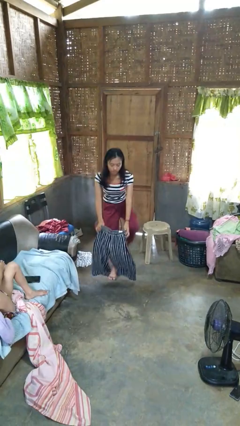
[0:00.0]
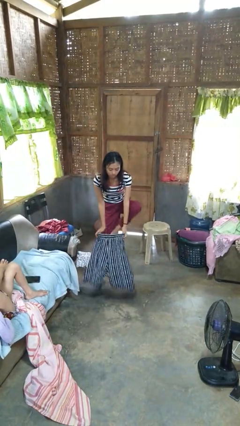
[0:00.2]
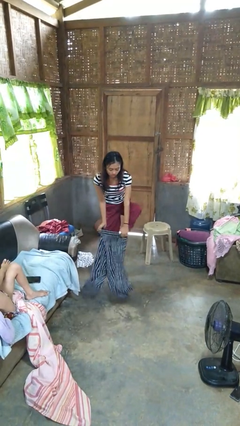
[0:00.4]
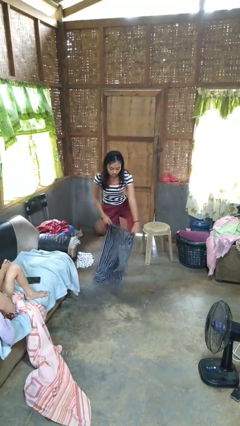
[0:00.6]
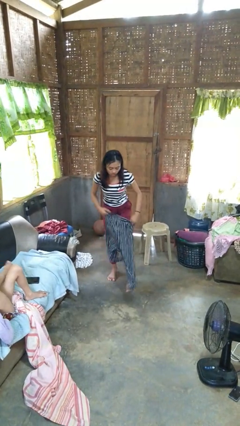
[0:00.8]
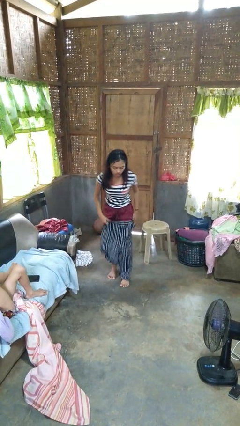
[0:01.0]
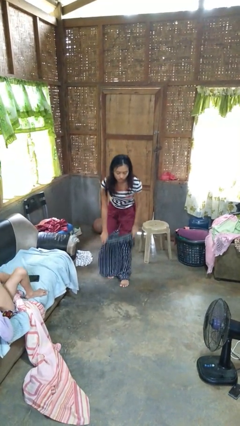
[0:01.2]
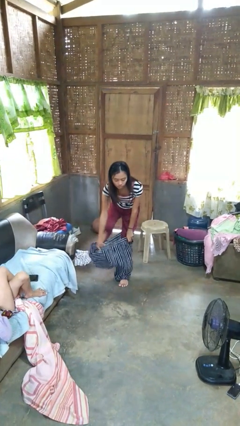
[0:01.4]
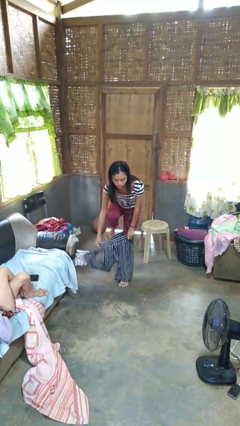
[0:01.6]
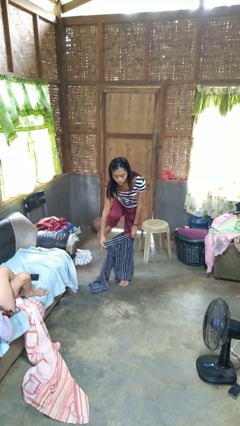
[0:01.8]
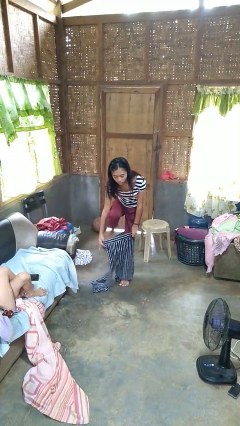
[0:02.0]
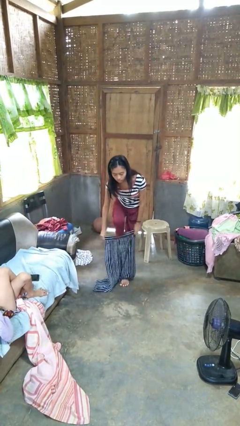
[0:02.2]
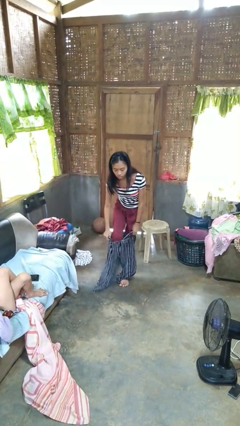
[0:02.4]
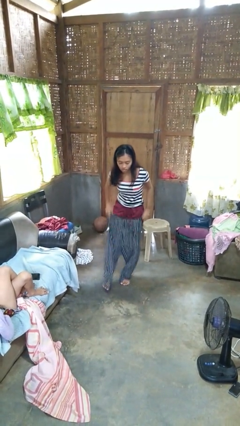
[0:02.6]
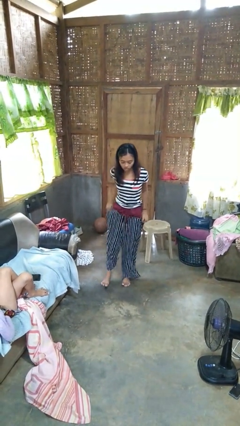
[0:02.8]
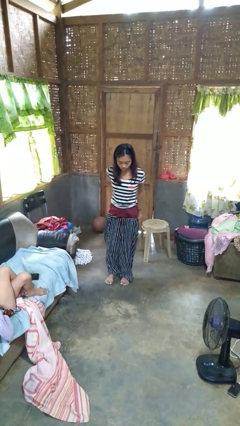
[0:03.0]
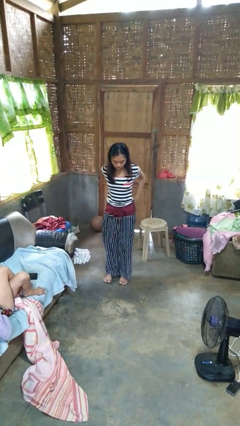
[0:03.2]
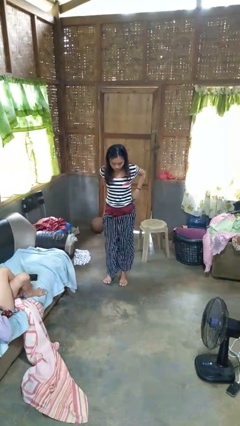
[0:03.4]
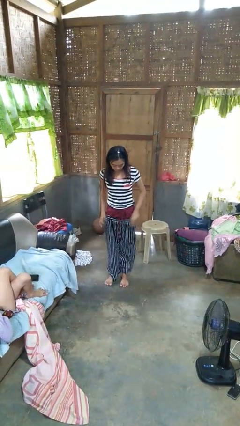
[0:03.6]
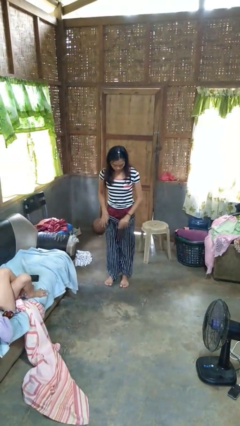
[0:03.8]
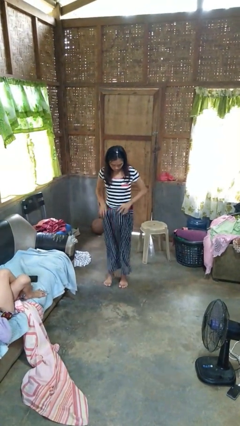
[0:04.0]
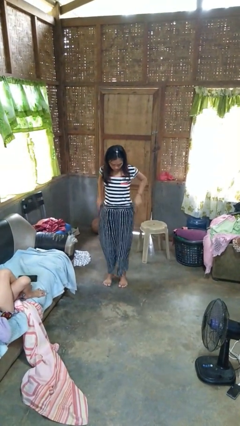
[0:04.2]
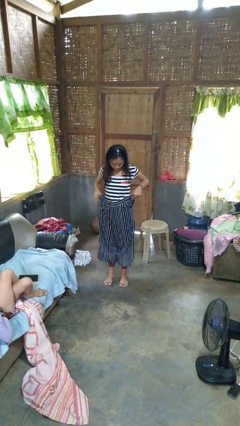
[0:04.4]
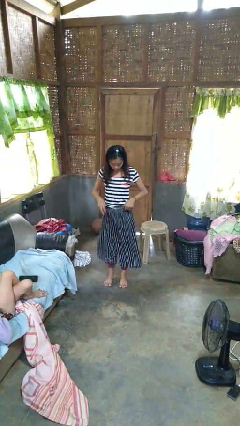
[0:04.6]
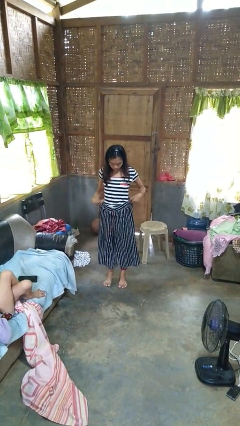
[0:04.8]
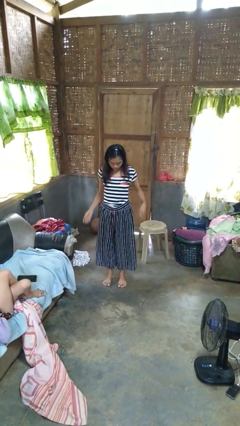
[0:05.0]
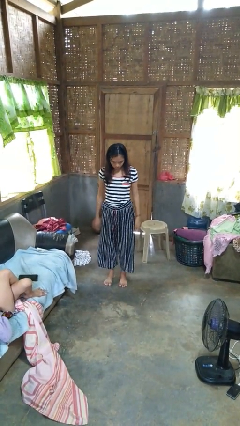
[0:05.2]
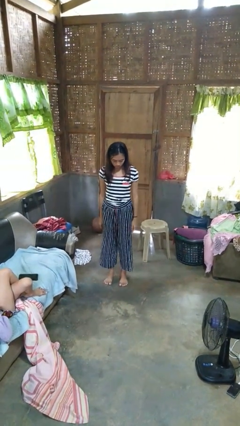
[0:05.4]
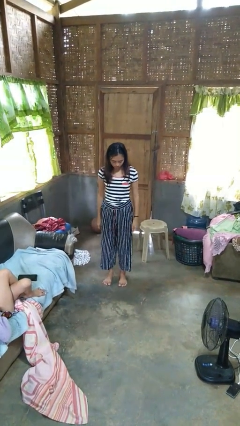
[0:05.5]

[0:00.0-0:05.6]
person puts on pants

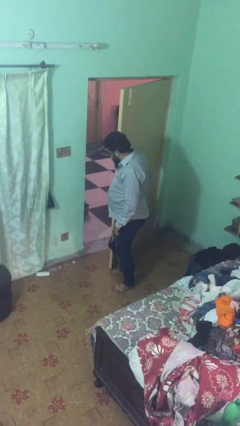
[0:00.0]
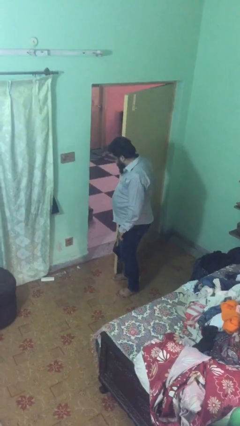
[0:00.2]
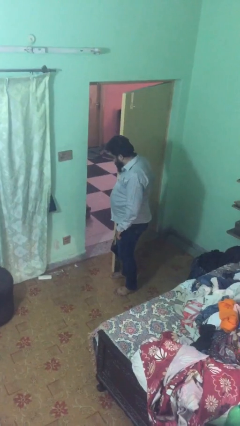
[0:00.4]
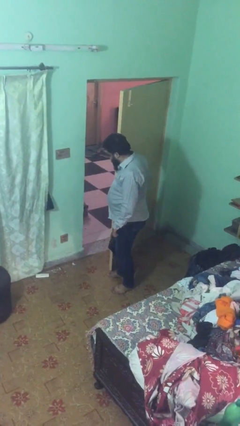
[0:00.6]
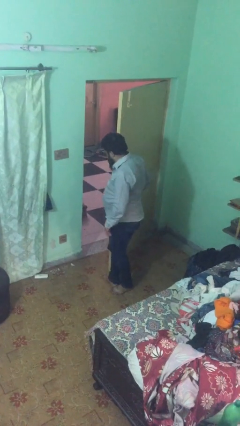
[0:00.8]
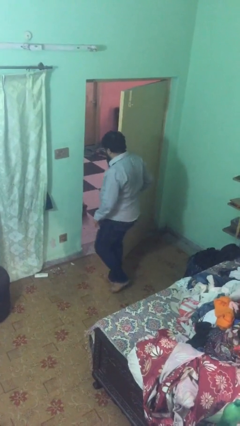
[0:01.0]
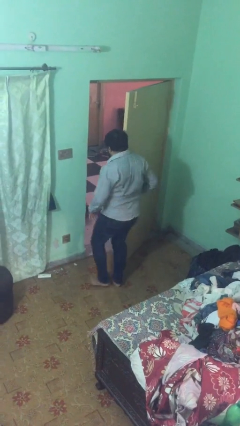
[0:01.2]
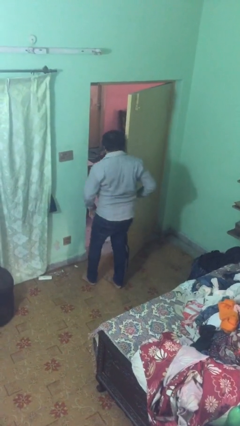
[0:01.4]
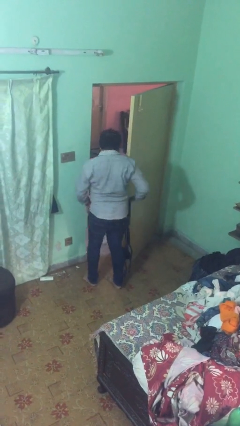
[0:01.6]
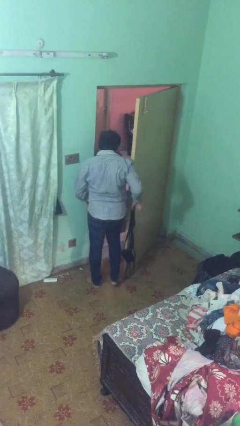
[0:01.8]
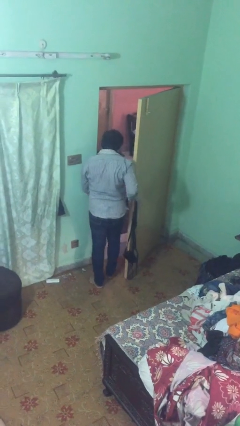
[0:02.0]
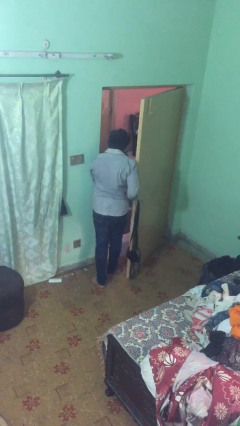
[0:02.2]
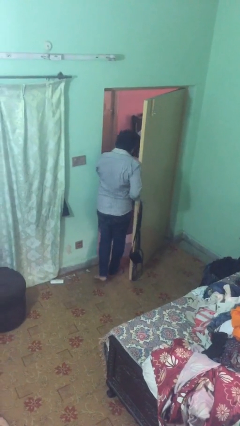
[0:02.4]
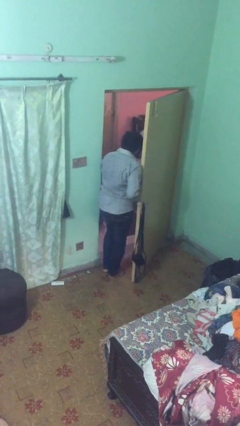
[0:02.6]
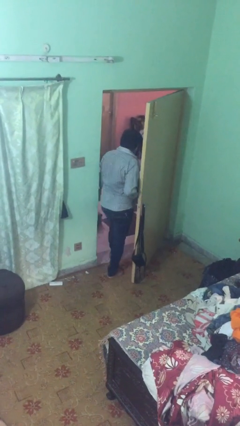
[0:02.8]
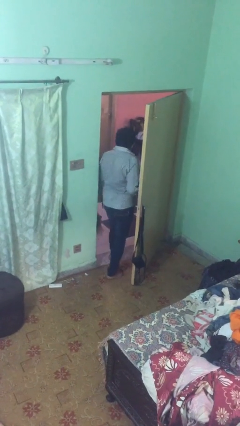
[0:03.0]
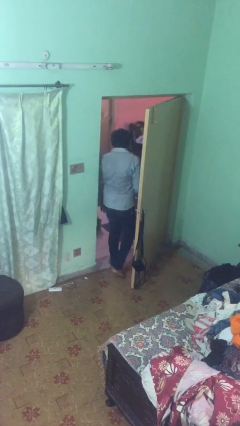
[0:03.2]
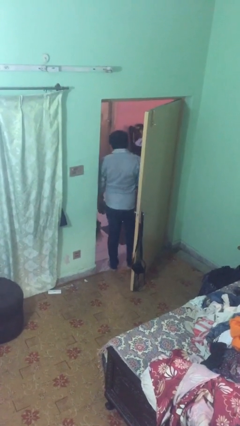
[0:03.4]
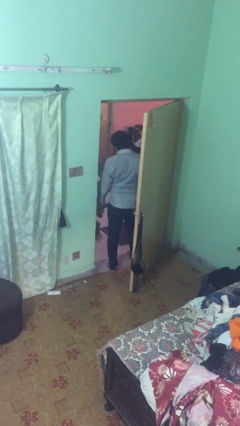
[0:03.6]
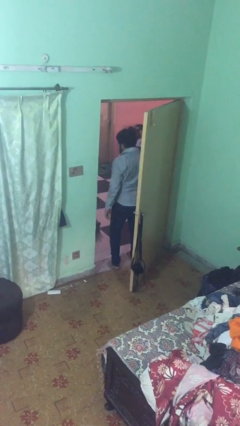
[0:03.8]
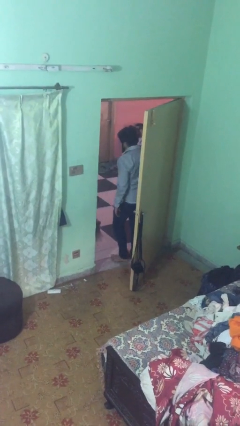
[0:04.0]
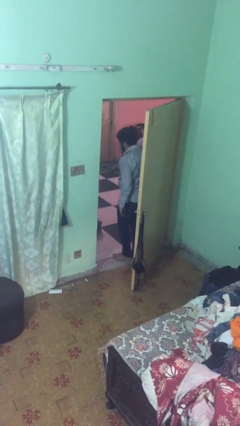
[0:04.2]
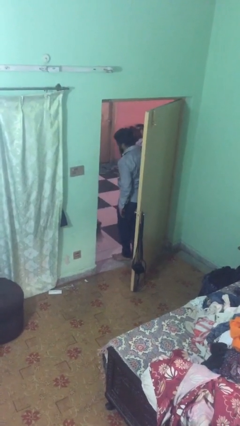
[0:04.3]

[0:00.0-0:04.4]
person exits scene through structure

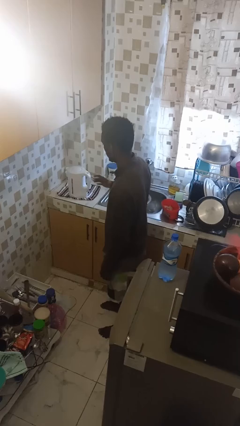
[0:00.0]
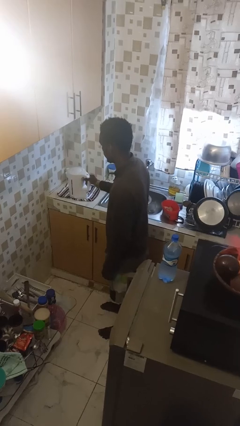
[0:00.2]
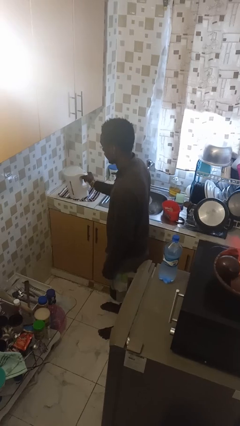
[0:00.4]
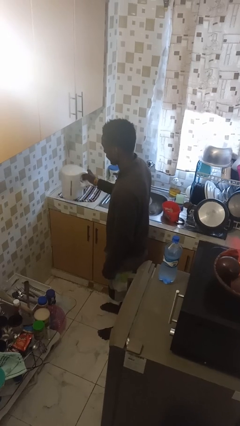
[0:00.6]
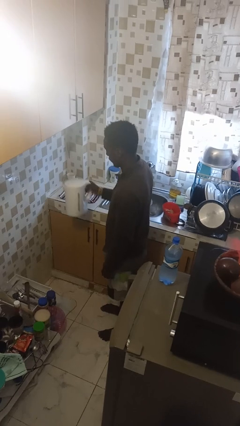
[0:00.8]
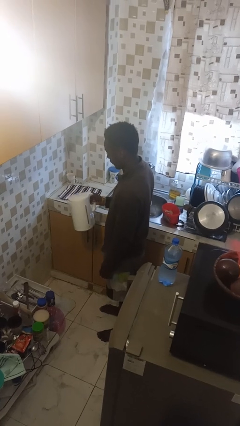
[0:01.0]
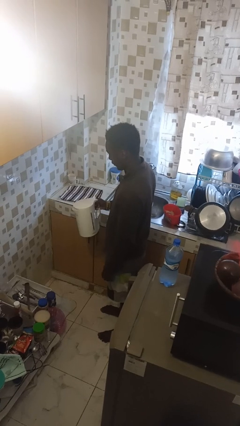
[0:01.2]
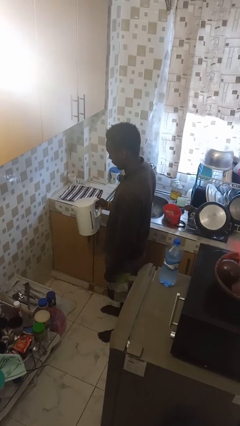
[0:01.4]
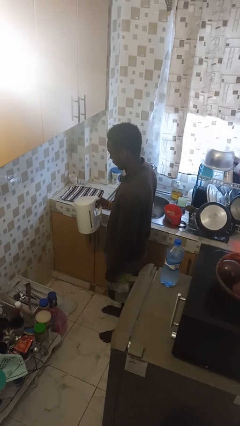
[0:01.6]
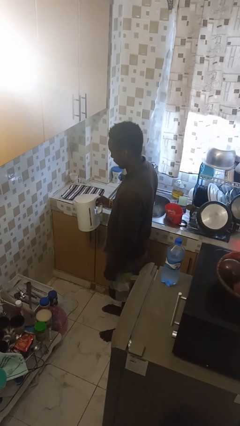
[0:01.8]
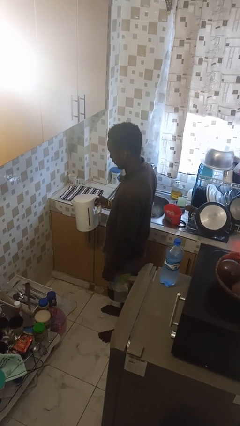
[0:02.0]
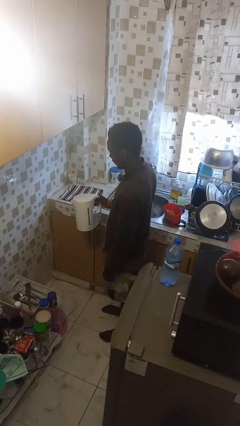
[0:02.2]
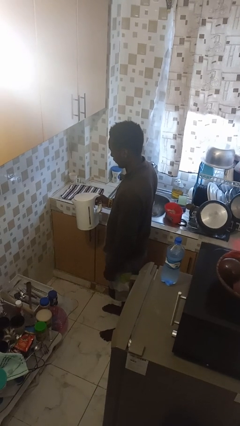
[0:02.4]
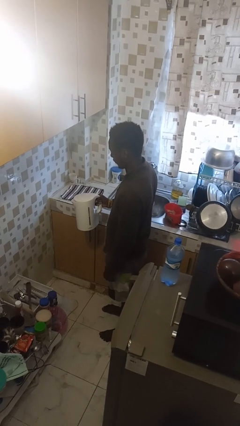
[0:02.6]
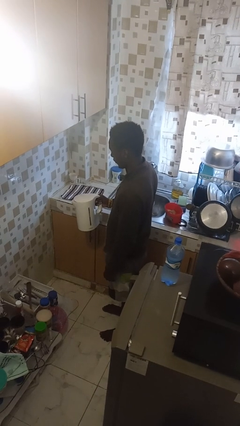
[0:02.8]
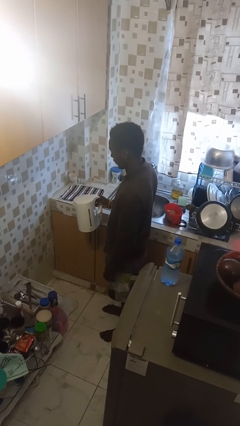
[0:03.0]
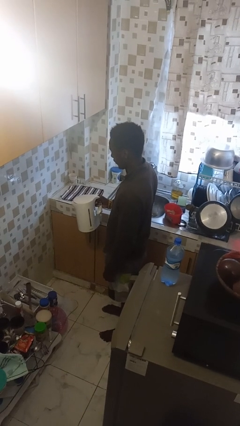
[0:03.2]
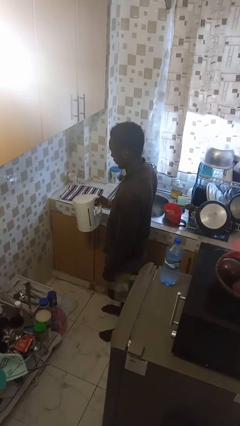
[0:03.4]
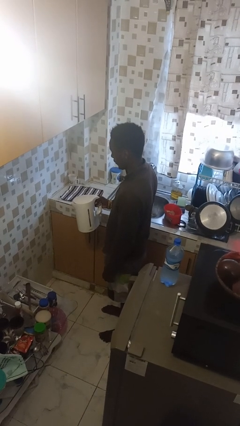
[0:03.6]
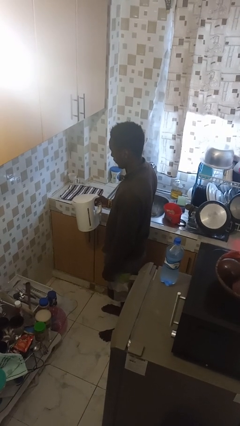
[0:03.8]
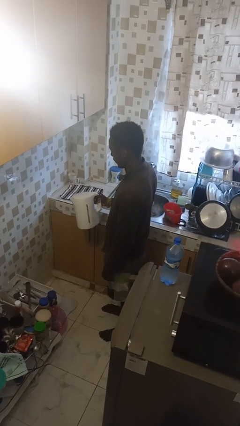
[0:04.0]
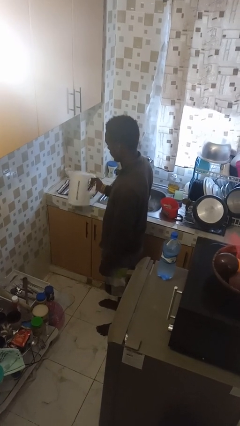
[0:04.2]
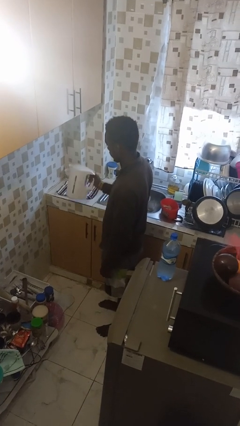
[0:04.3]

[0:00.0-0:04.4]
person picks up object from countertop

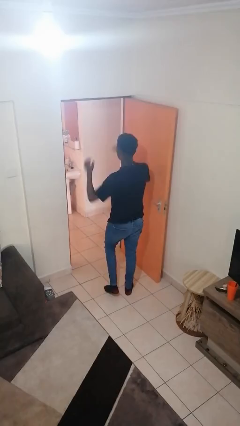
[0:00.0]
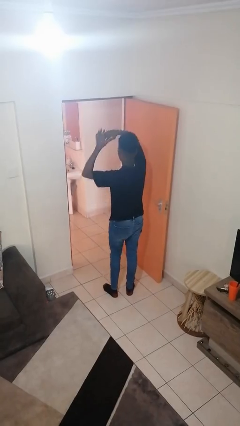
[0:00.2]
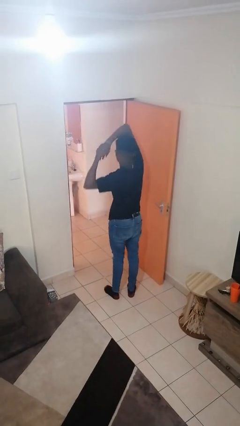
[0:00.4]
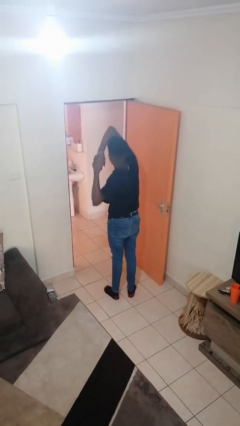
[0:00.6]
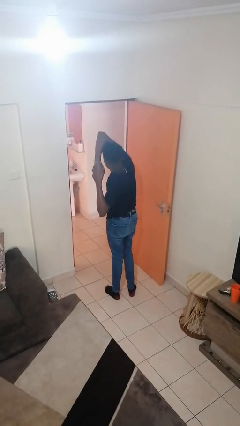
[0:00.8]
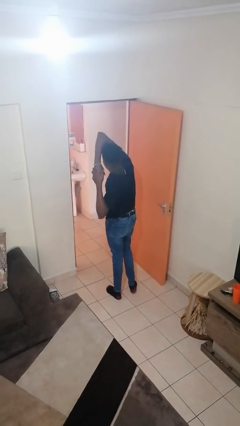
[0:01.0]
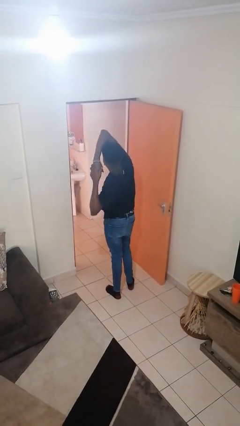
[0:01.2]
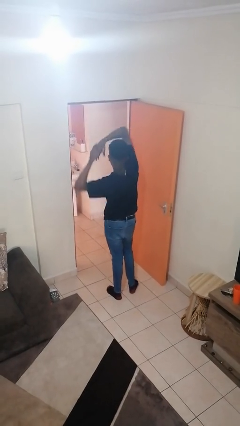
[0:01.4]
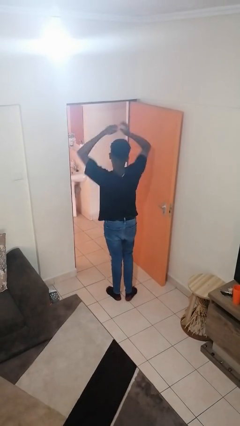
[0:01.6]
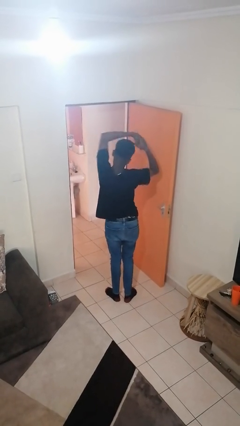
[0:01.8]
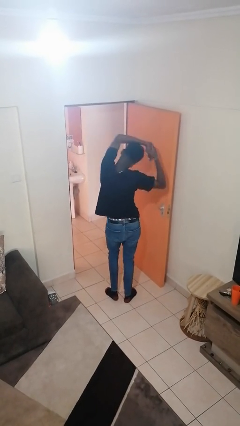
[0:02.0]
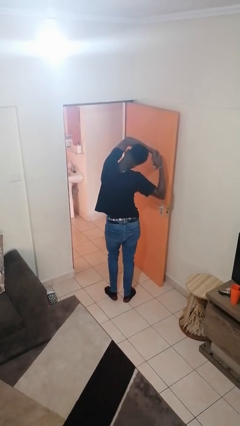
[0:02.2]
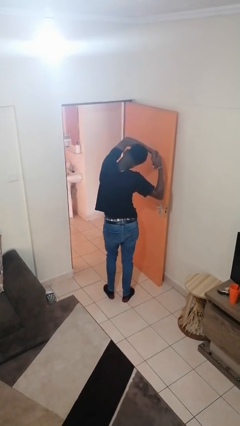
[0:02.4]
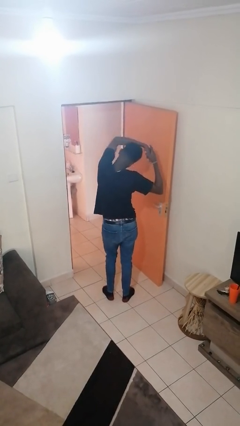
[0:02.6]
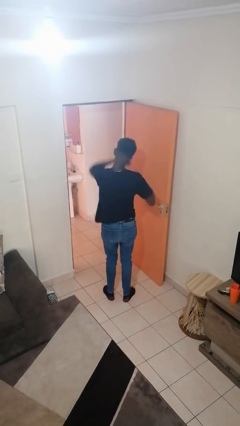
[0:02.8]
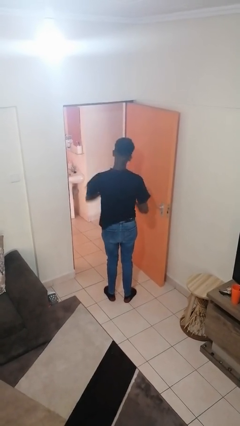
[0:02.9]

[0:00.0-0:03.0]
person stretches arms over head

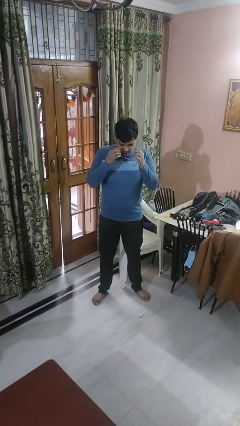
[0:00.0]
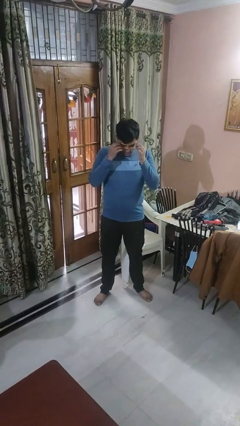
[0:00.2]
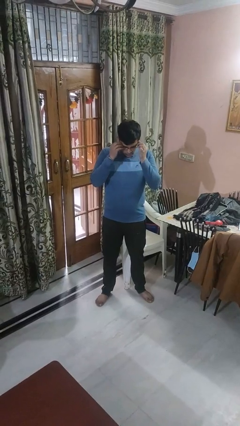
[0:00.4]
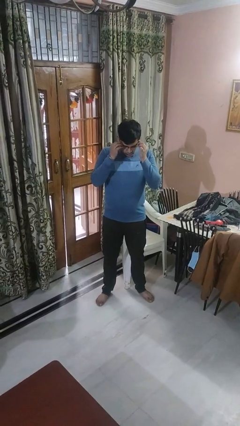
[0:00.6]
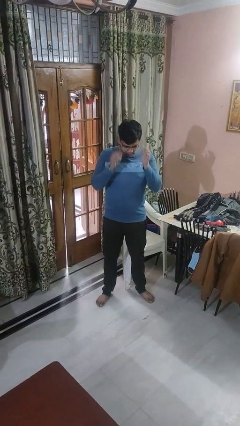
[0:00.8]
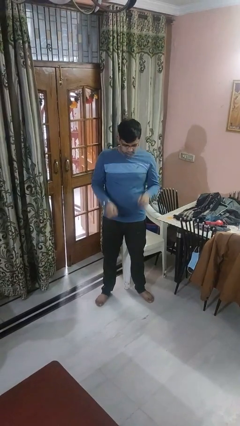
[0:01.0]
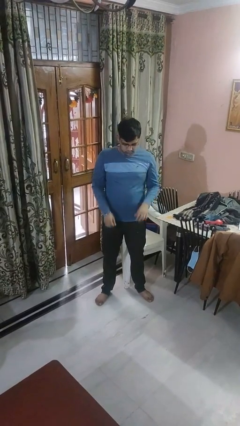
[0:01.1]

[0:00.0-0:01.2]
person puts on glasses
